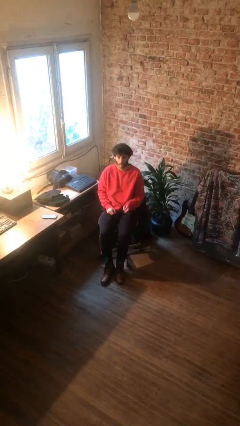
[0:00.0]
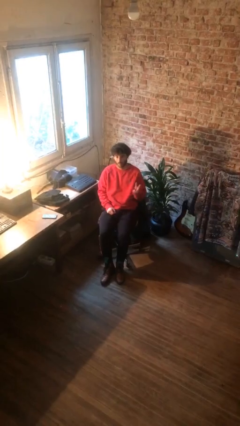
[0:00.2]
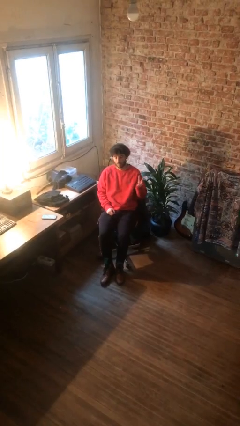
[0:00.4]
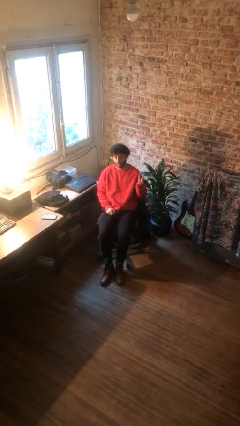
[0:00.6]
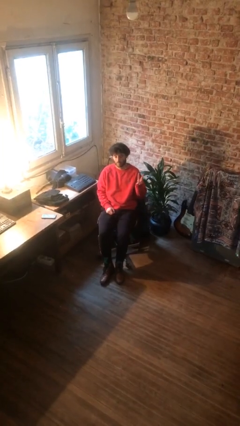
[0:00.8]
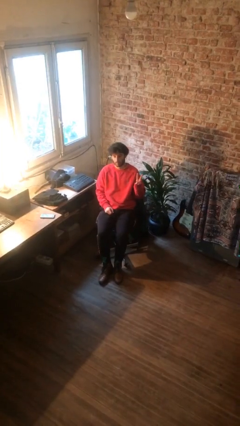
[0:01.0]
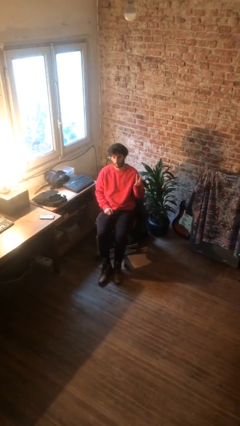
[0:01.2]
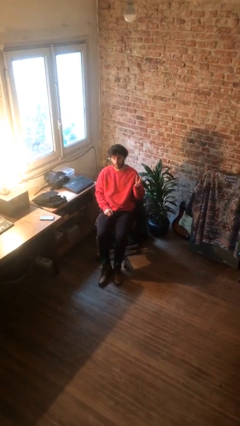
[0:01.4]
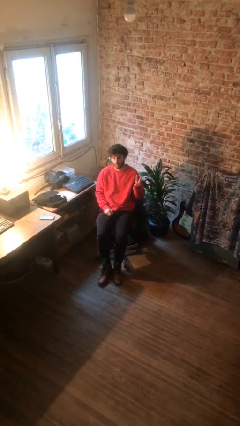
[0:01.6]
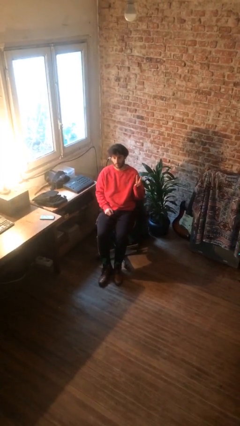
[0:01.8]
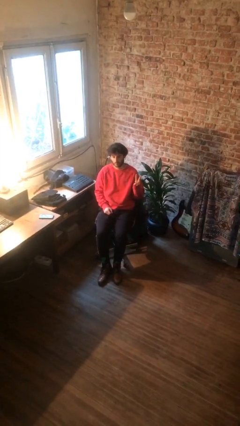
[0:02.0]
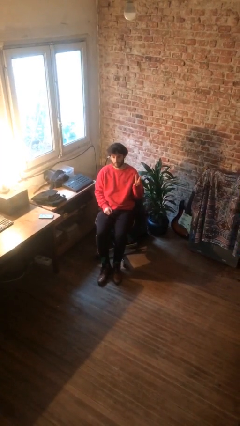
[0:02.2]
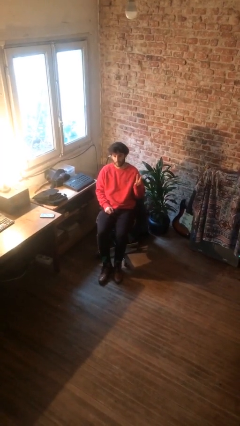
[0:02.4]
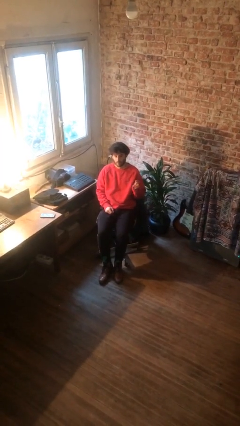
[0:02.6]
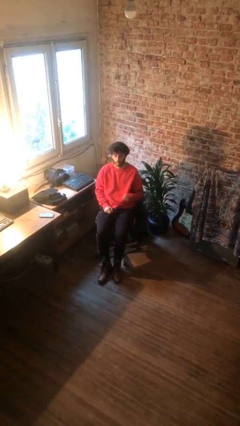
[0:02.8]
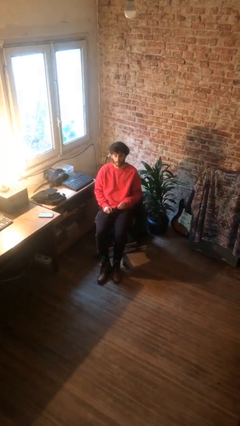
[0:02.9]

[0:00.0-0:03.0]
person gestures peace

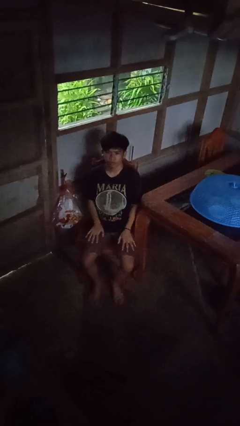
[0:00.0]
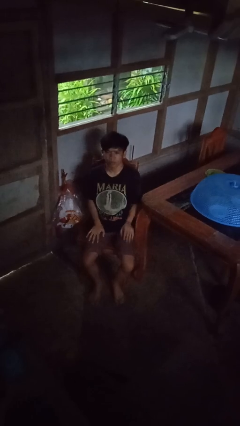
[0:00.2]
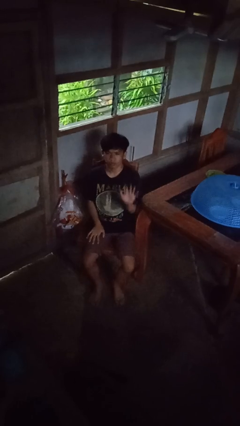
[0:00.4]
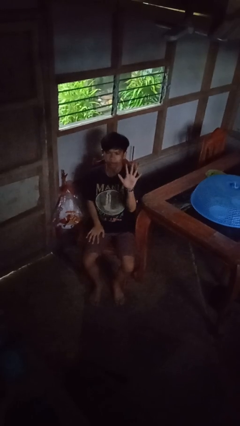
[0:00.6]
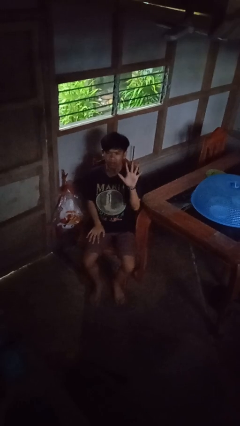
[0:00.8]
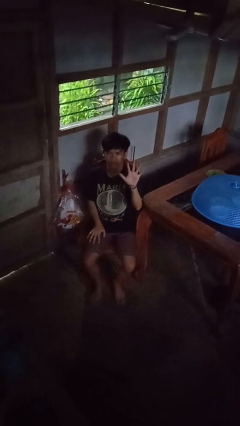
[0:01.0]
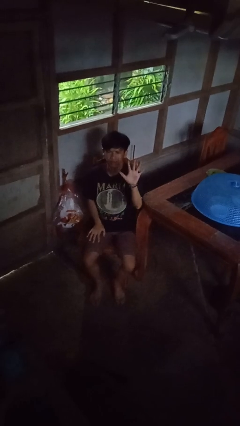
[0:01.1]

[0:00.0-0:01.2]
person gestures number five

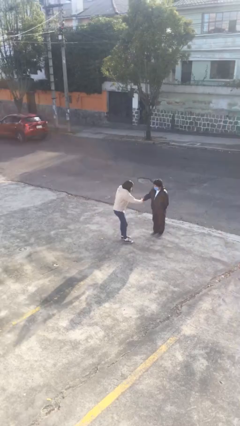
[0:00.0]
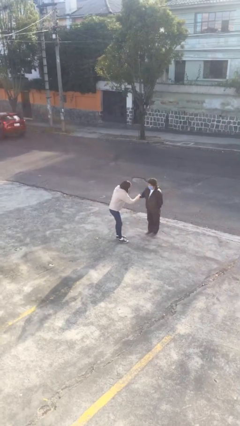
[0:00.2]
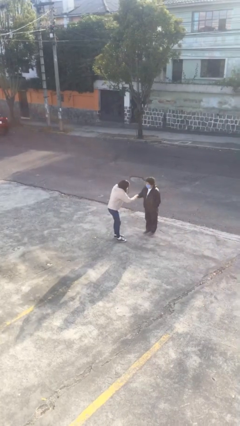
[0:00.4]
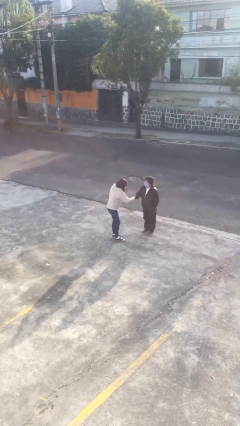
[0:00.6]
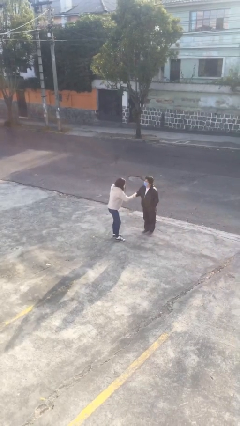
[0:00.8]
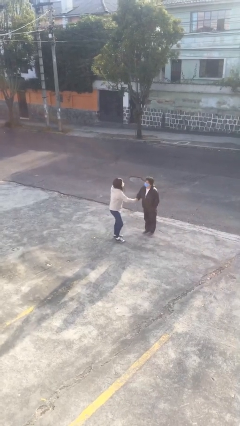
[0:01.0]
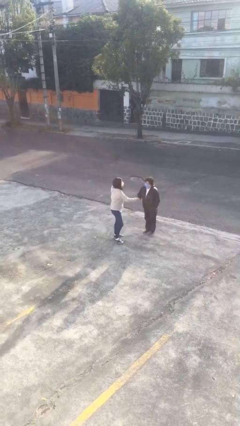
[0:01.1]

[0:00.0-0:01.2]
person shakes hand

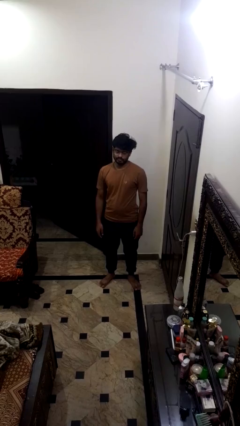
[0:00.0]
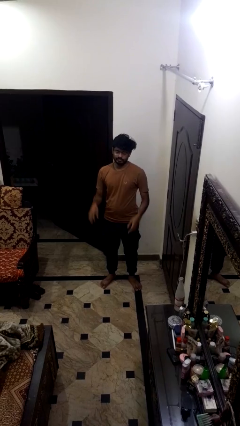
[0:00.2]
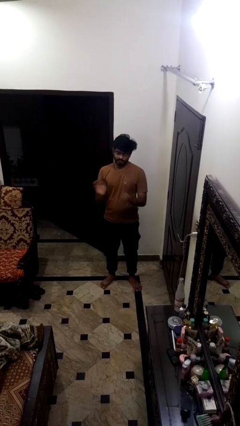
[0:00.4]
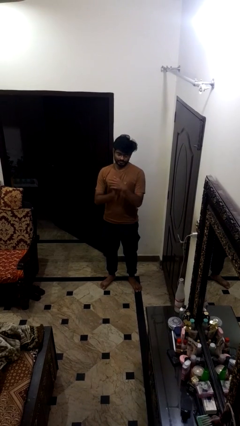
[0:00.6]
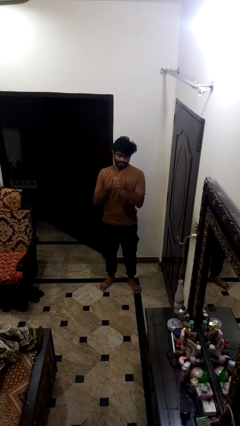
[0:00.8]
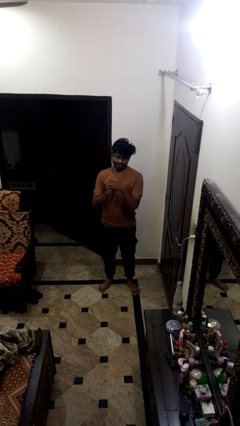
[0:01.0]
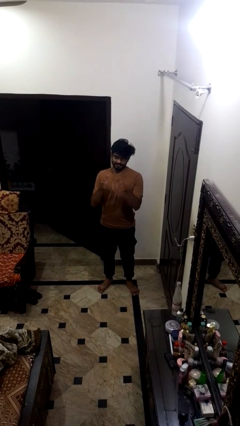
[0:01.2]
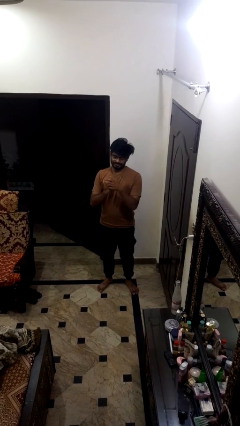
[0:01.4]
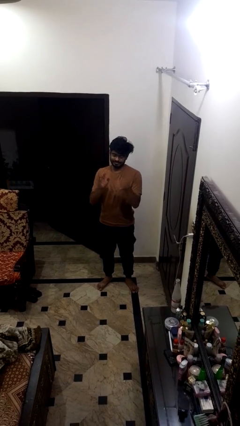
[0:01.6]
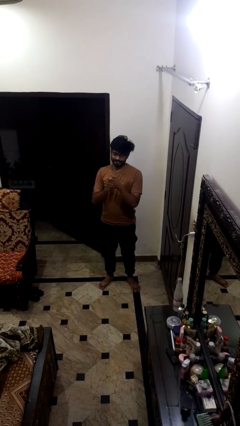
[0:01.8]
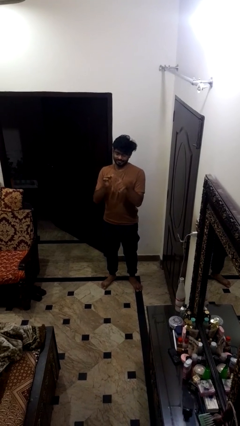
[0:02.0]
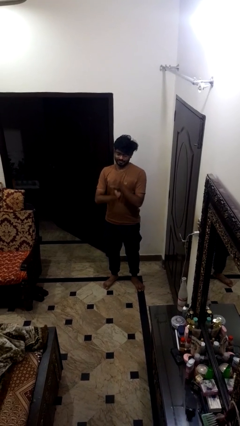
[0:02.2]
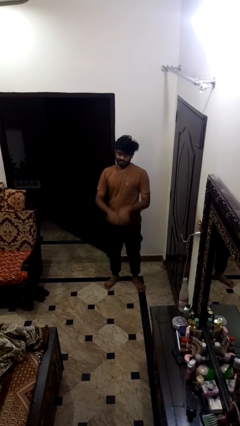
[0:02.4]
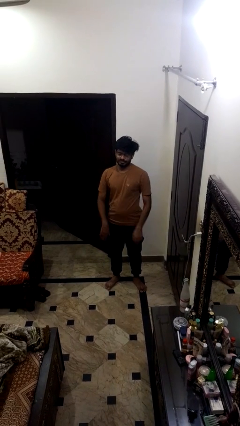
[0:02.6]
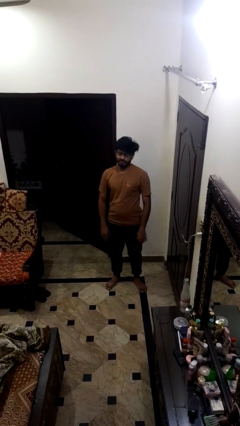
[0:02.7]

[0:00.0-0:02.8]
person claps hands

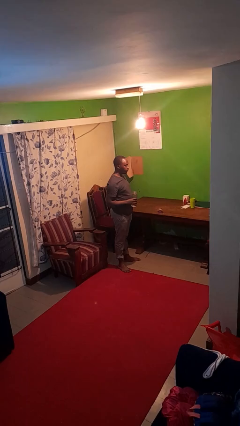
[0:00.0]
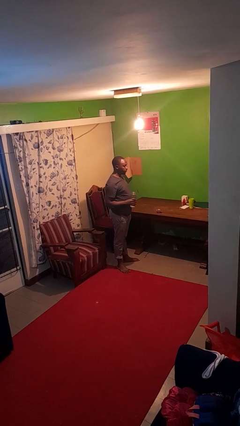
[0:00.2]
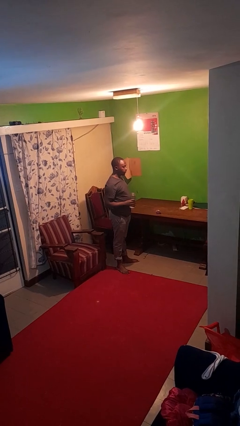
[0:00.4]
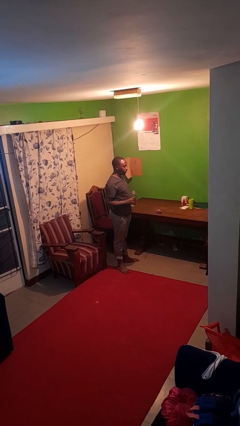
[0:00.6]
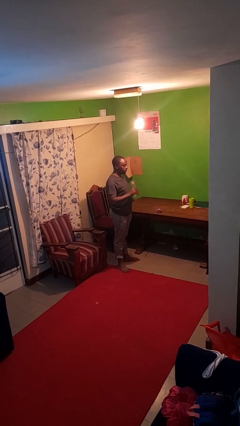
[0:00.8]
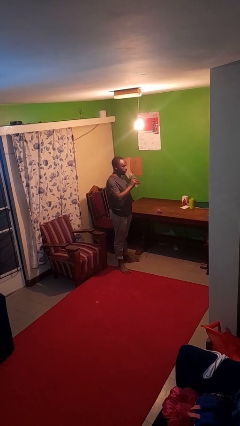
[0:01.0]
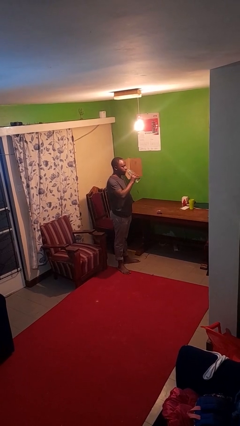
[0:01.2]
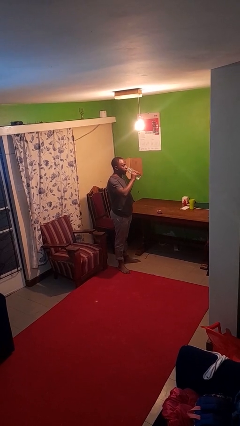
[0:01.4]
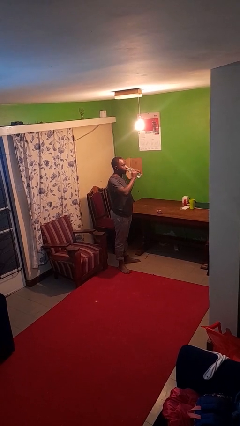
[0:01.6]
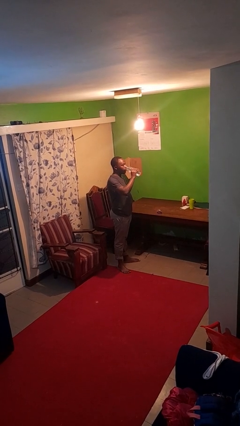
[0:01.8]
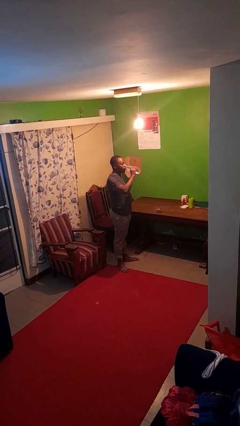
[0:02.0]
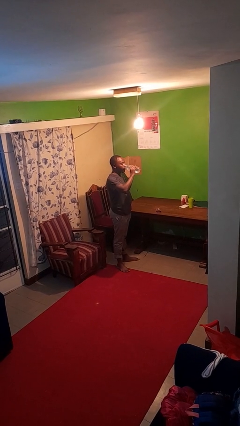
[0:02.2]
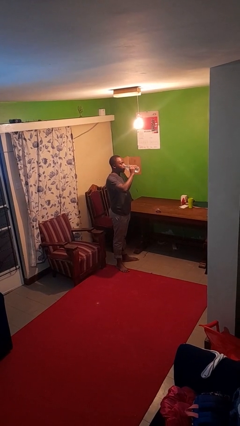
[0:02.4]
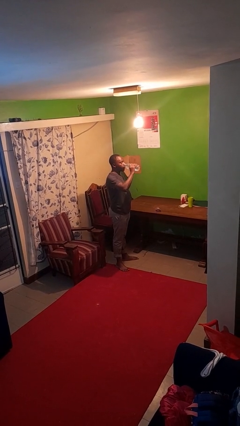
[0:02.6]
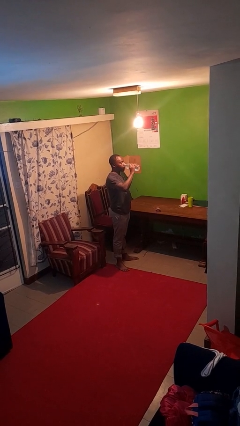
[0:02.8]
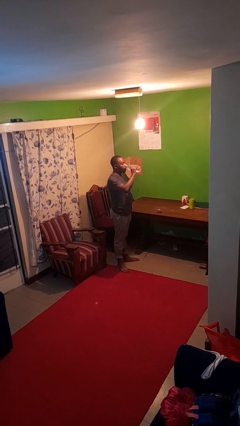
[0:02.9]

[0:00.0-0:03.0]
person drinks from bottle

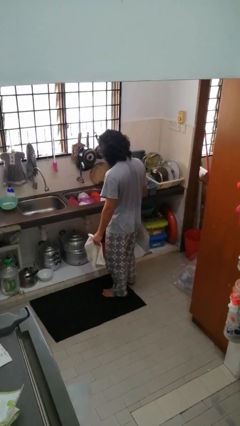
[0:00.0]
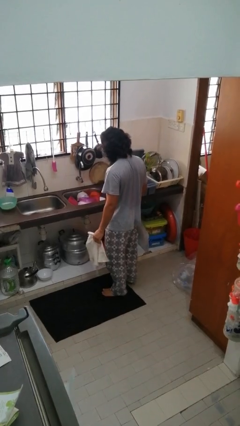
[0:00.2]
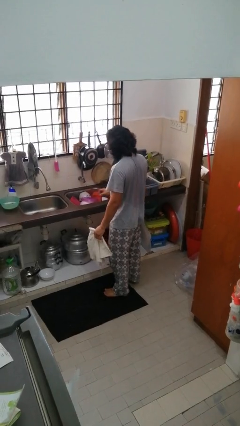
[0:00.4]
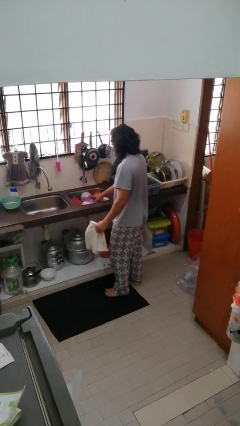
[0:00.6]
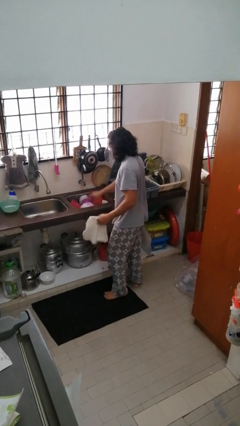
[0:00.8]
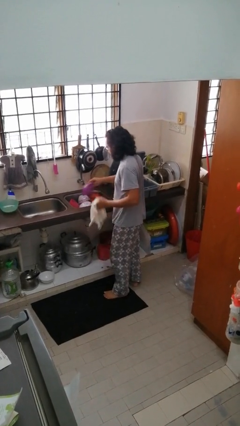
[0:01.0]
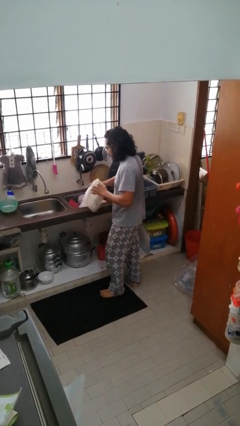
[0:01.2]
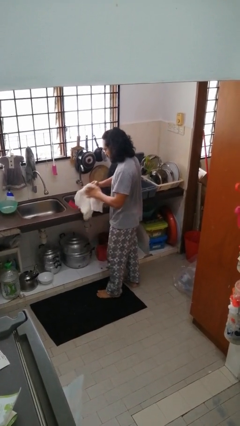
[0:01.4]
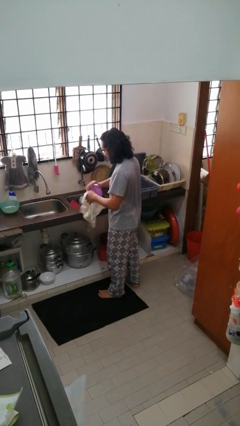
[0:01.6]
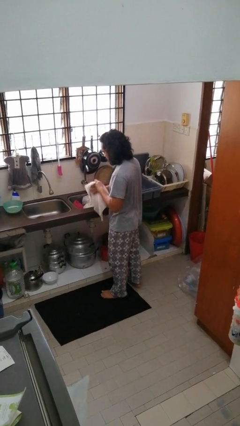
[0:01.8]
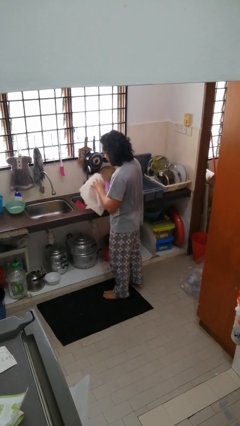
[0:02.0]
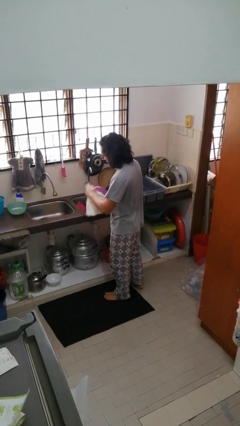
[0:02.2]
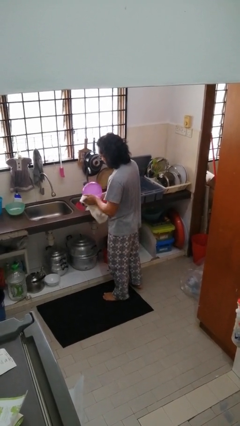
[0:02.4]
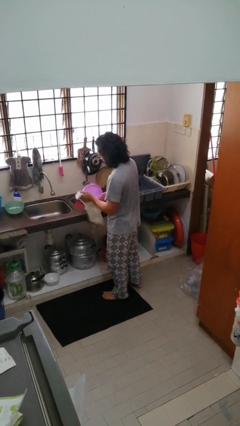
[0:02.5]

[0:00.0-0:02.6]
person dries dish

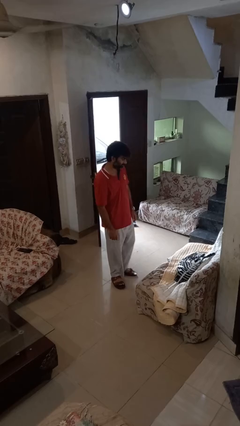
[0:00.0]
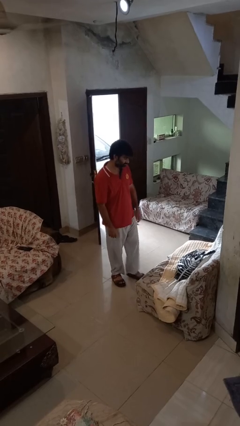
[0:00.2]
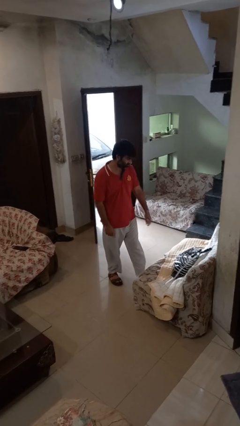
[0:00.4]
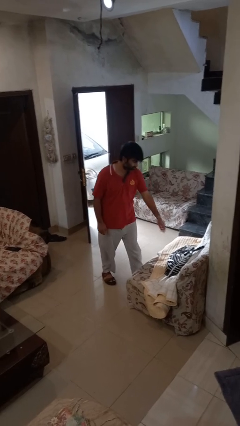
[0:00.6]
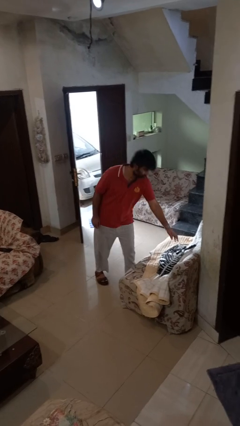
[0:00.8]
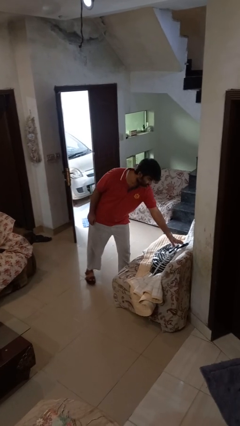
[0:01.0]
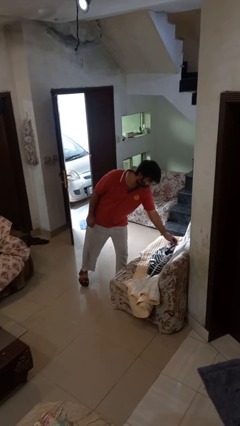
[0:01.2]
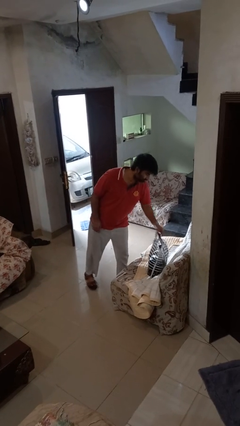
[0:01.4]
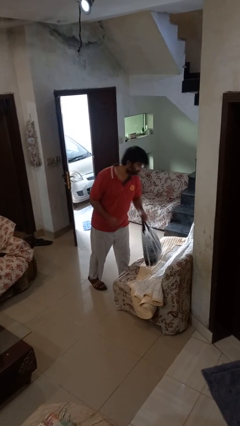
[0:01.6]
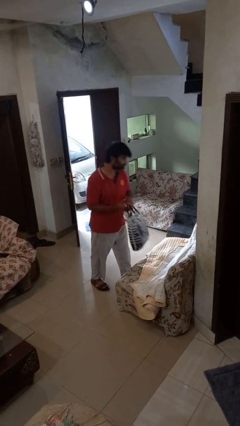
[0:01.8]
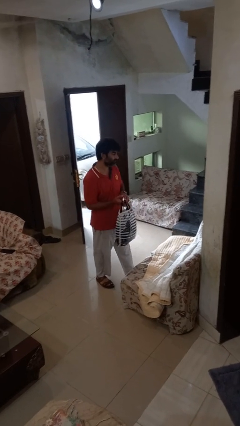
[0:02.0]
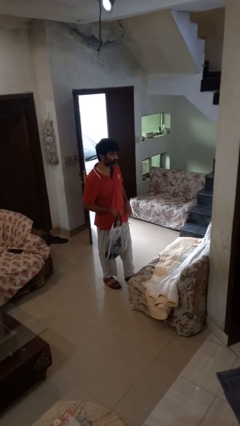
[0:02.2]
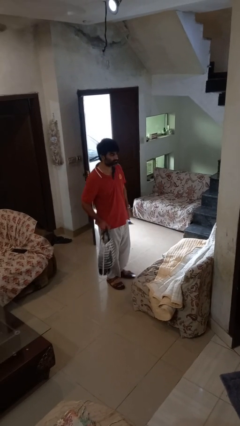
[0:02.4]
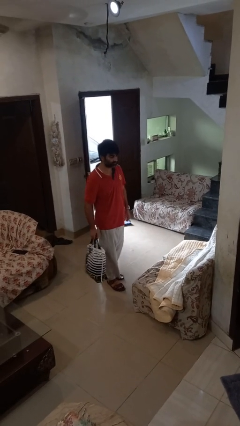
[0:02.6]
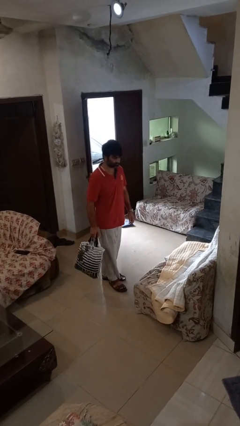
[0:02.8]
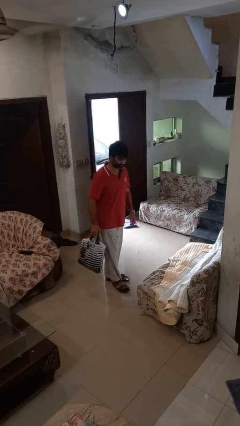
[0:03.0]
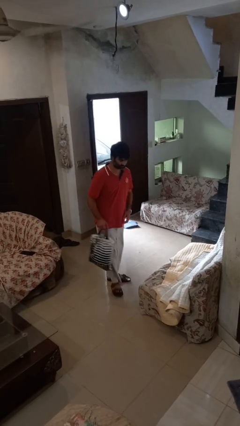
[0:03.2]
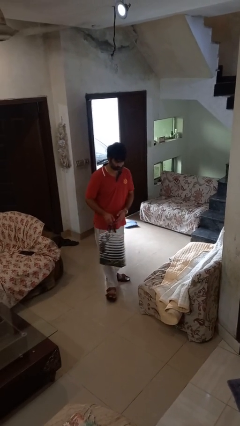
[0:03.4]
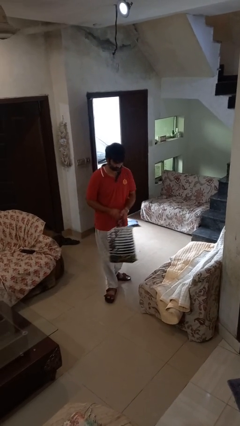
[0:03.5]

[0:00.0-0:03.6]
person picks up object from couch
